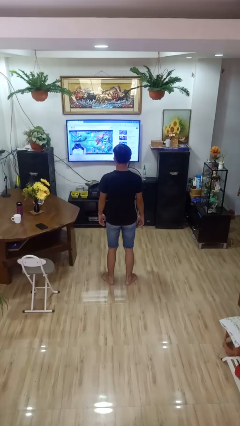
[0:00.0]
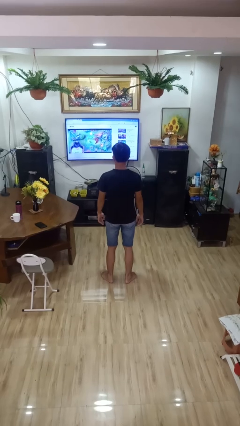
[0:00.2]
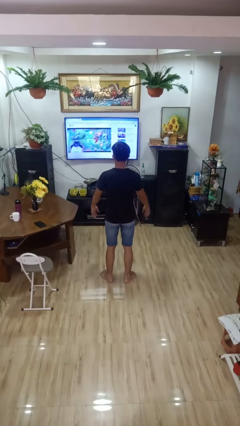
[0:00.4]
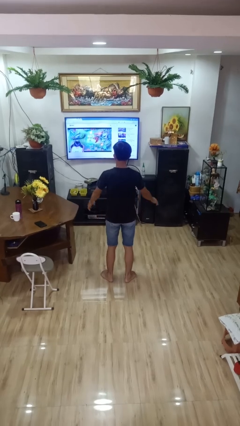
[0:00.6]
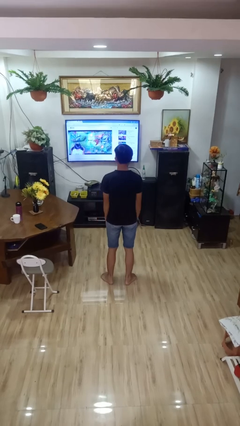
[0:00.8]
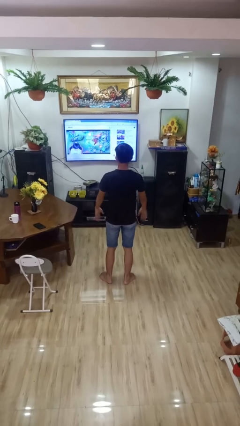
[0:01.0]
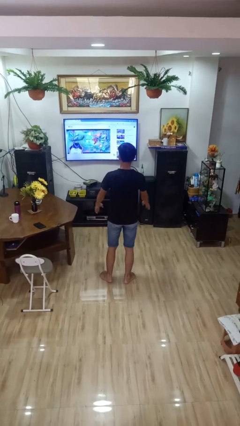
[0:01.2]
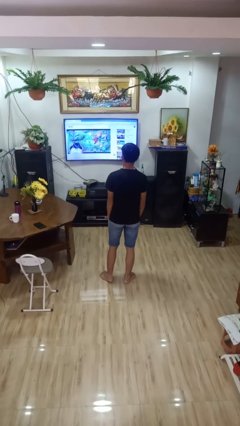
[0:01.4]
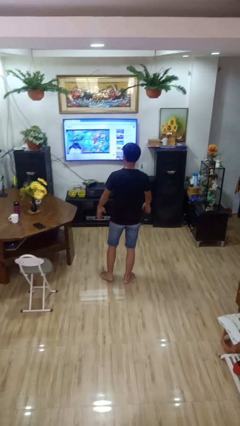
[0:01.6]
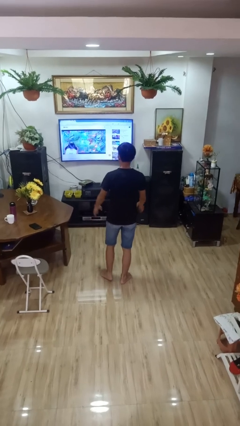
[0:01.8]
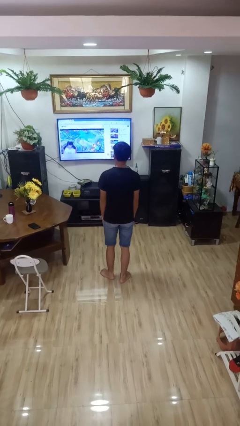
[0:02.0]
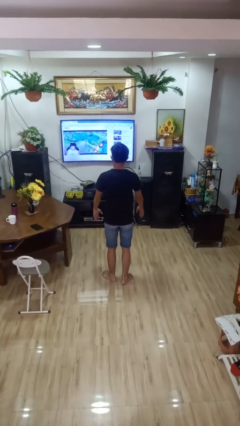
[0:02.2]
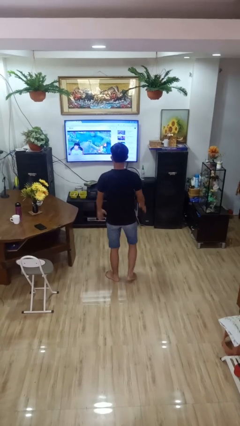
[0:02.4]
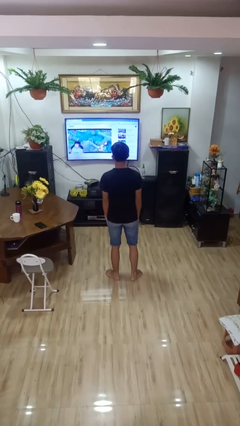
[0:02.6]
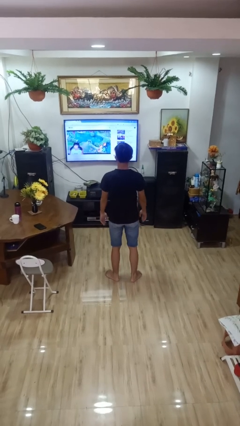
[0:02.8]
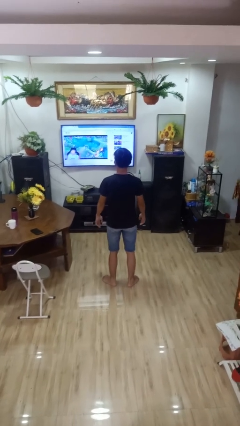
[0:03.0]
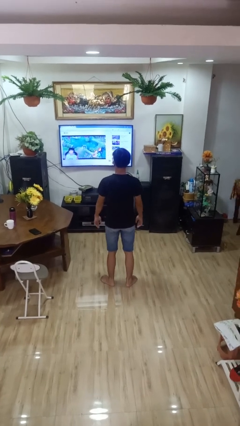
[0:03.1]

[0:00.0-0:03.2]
person slaps hands on thighs

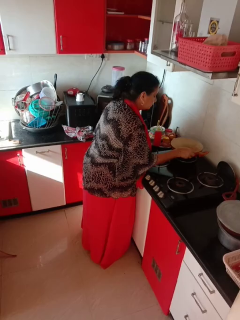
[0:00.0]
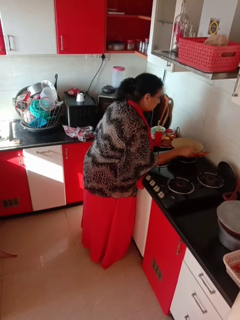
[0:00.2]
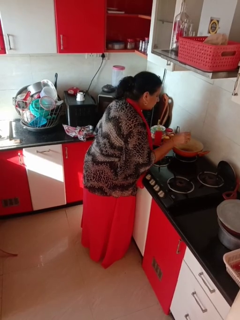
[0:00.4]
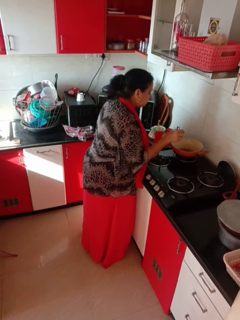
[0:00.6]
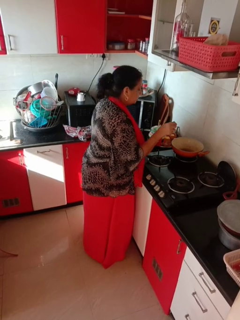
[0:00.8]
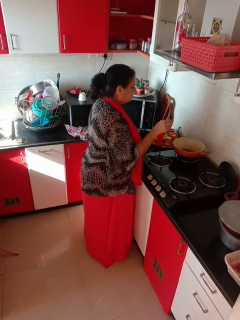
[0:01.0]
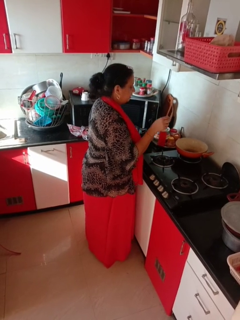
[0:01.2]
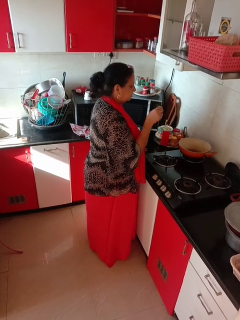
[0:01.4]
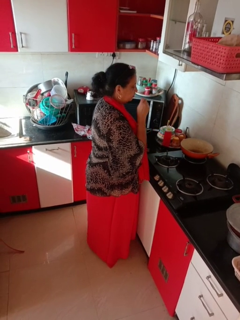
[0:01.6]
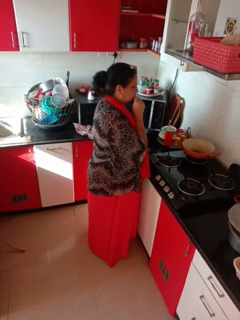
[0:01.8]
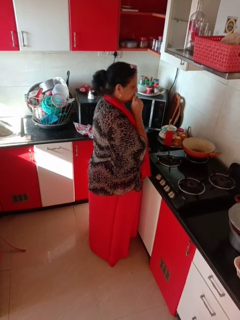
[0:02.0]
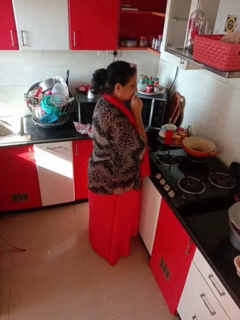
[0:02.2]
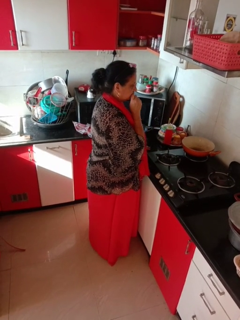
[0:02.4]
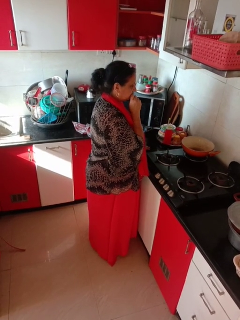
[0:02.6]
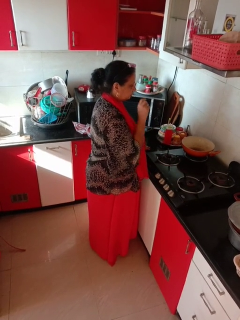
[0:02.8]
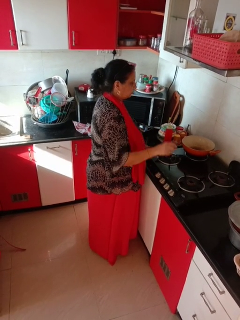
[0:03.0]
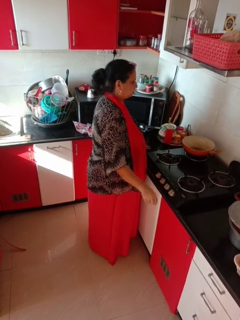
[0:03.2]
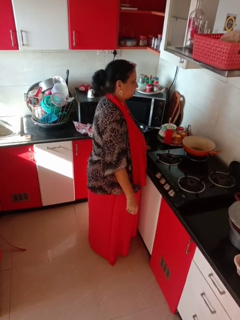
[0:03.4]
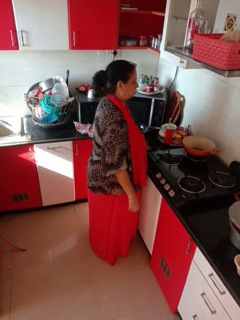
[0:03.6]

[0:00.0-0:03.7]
person burns hand

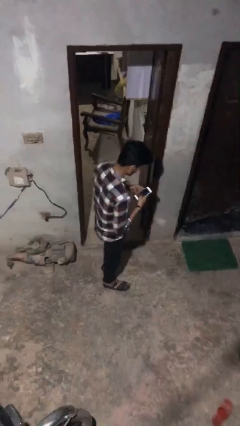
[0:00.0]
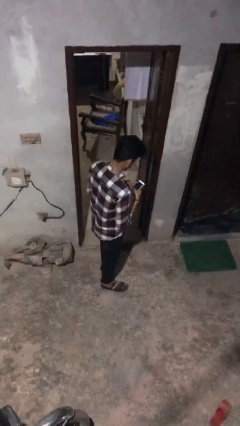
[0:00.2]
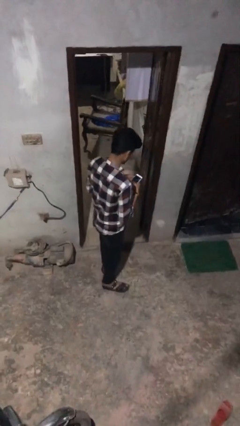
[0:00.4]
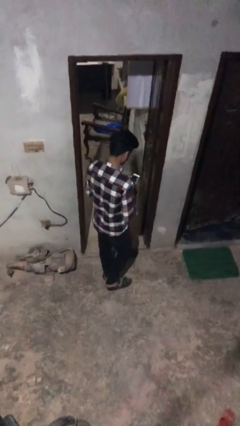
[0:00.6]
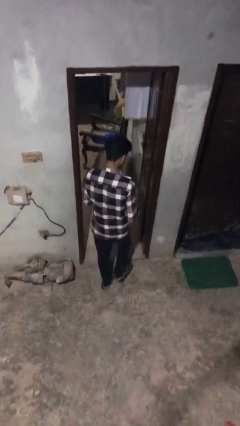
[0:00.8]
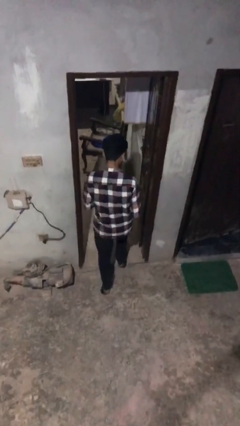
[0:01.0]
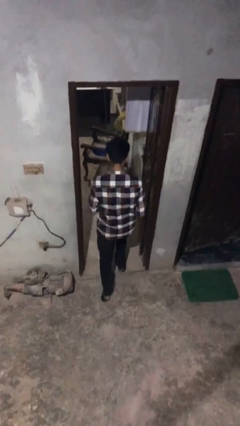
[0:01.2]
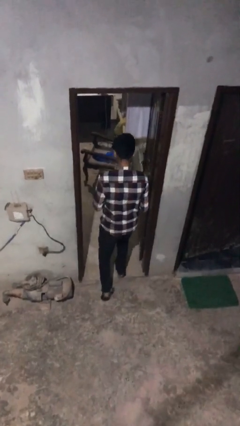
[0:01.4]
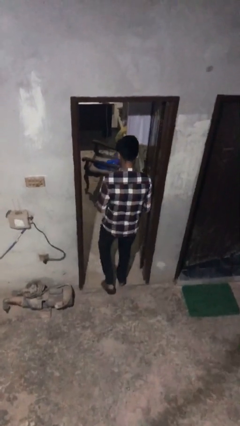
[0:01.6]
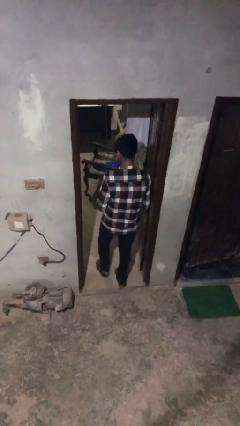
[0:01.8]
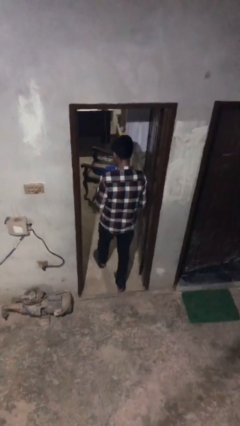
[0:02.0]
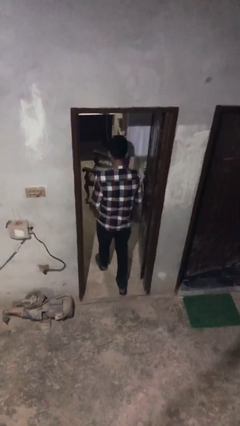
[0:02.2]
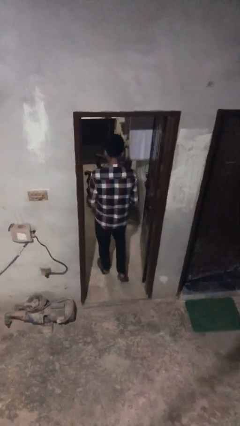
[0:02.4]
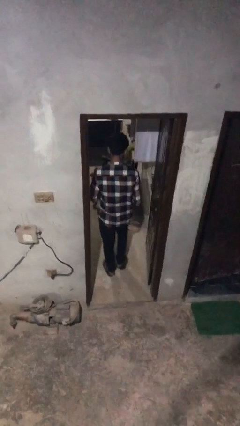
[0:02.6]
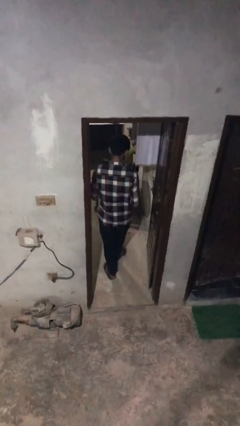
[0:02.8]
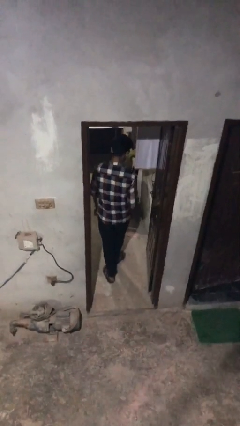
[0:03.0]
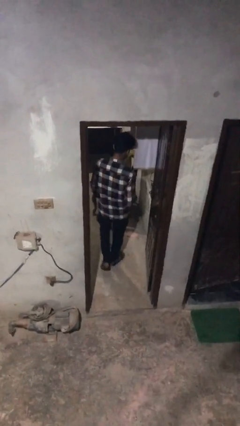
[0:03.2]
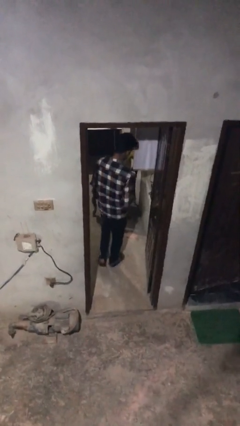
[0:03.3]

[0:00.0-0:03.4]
person exits scene through structure

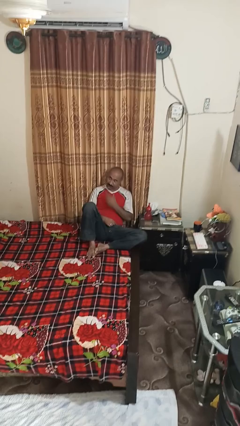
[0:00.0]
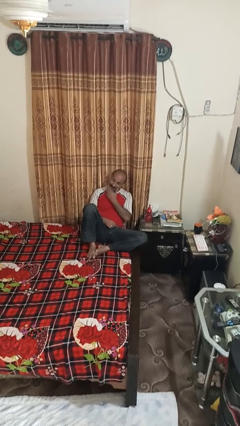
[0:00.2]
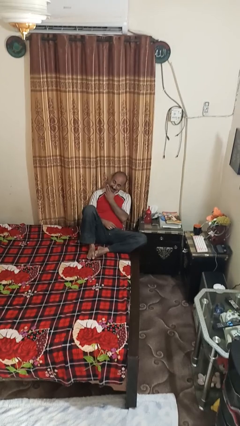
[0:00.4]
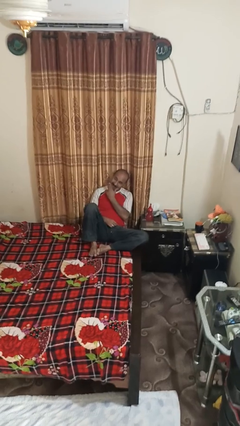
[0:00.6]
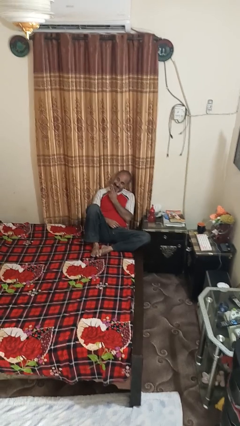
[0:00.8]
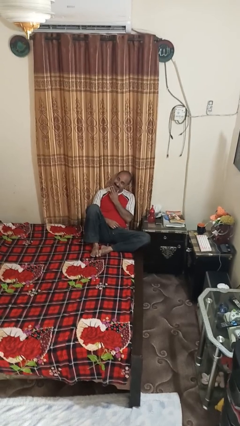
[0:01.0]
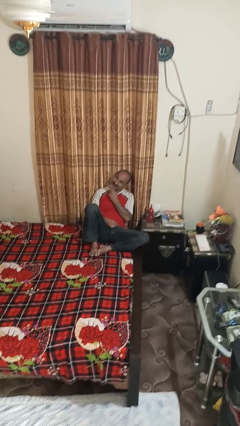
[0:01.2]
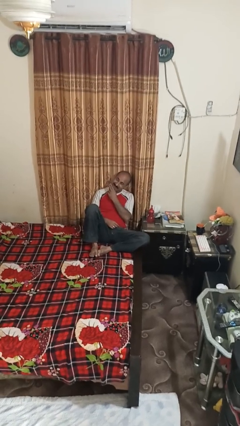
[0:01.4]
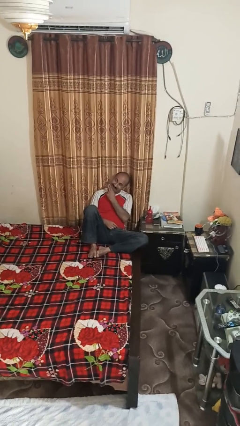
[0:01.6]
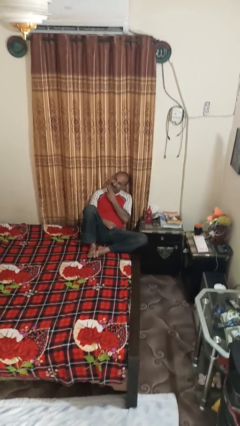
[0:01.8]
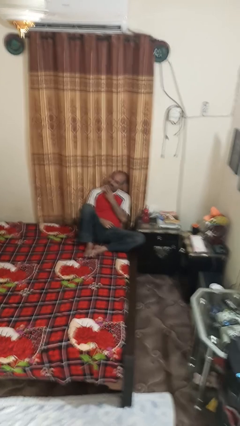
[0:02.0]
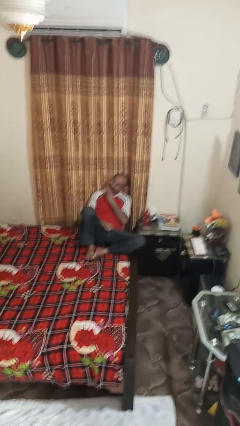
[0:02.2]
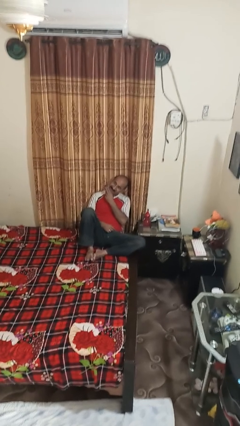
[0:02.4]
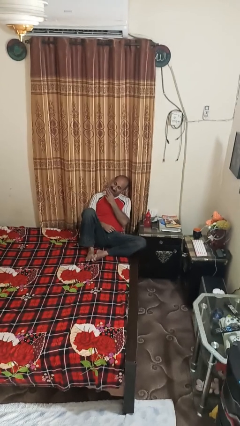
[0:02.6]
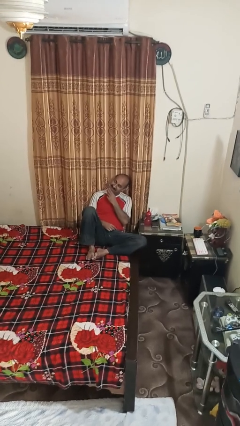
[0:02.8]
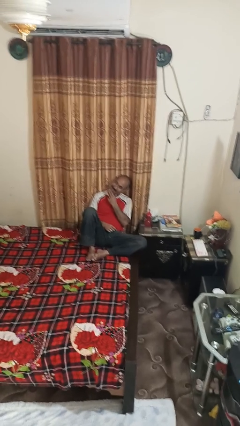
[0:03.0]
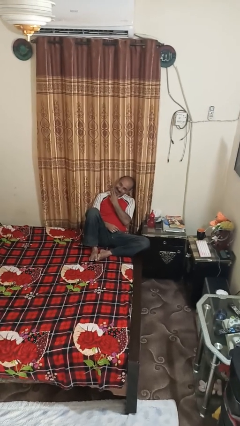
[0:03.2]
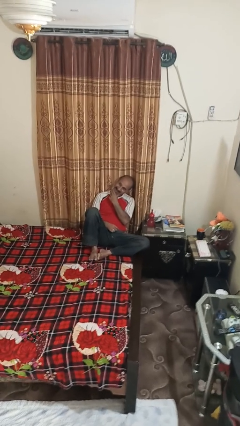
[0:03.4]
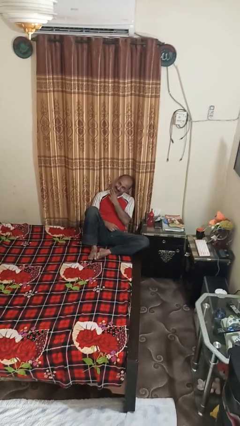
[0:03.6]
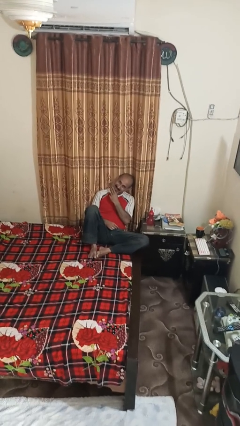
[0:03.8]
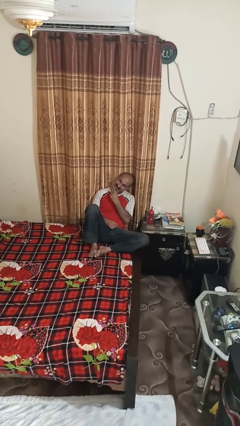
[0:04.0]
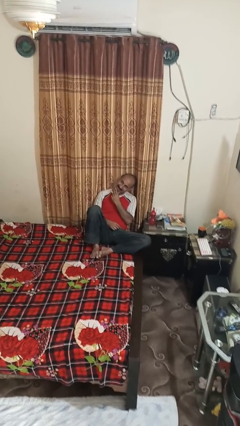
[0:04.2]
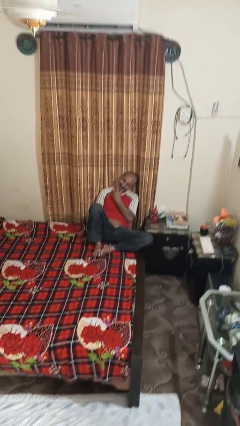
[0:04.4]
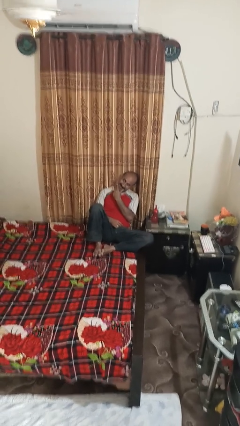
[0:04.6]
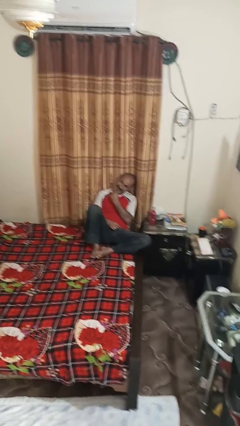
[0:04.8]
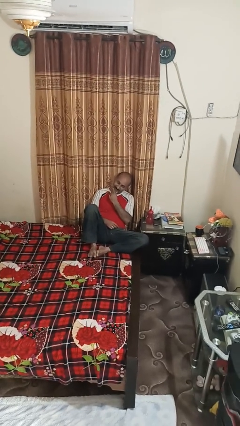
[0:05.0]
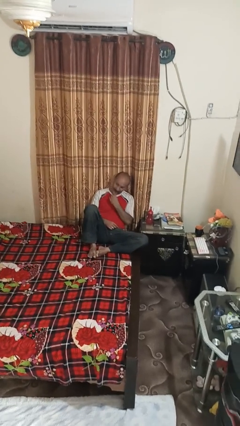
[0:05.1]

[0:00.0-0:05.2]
person strokes chin

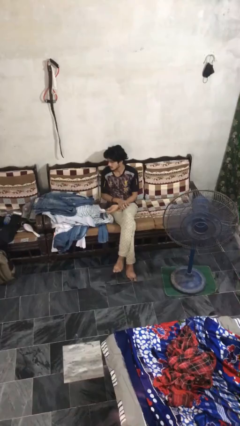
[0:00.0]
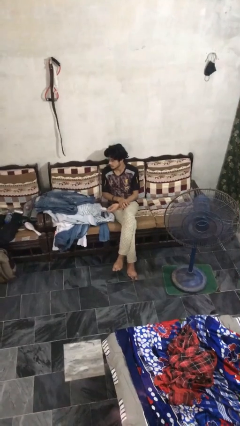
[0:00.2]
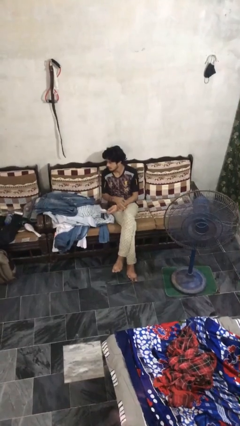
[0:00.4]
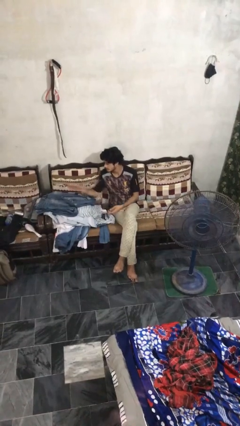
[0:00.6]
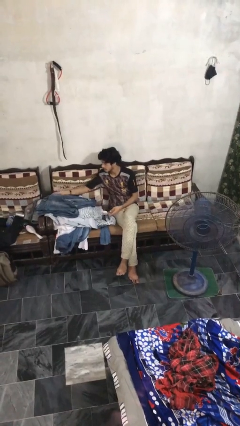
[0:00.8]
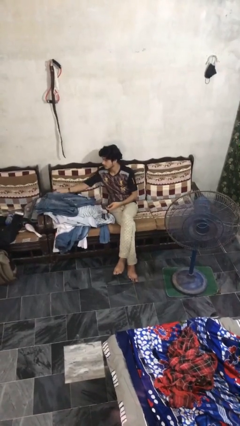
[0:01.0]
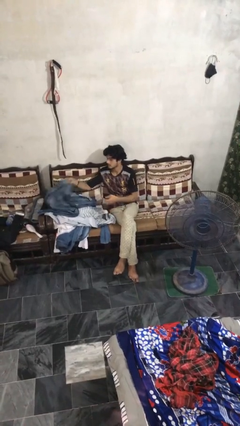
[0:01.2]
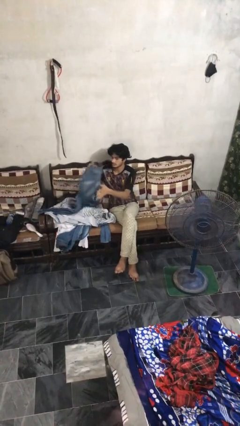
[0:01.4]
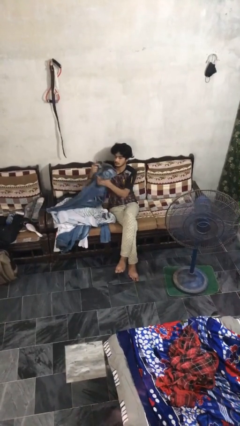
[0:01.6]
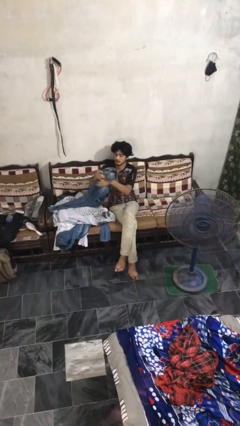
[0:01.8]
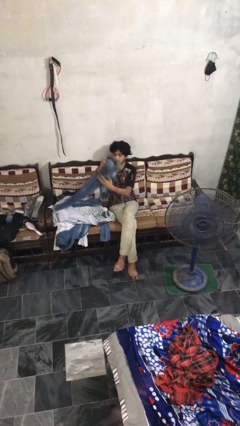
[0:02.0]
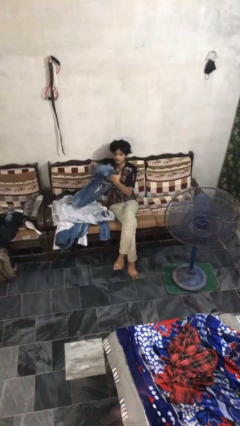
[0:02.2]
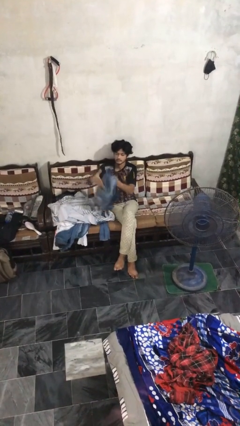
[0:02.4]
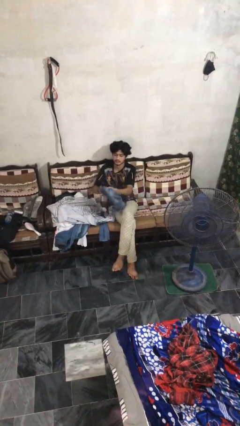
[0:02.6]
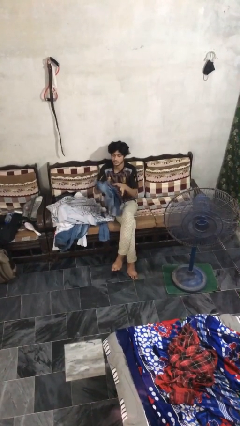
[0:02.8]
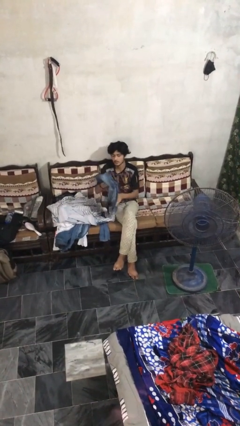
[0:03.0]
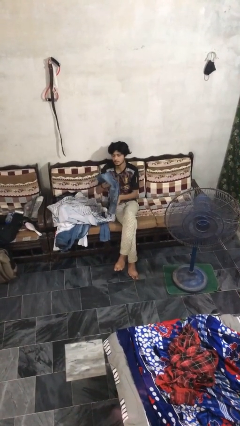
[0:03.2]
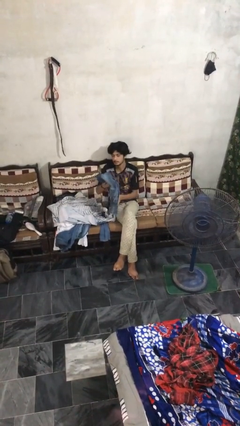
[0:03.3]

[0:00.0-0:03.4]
person folds pants
